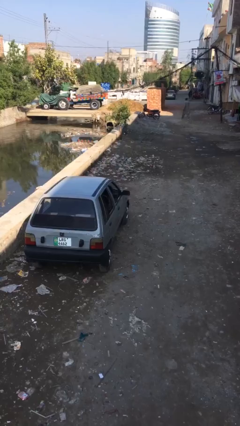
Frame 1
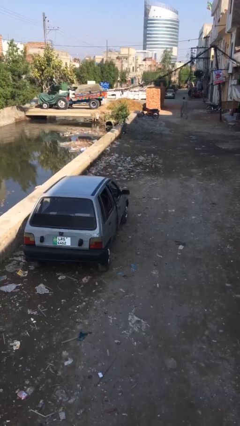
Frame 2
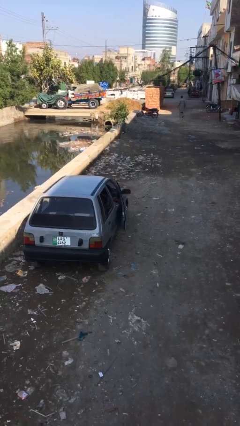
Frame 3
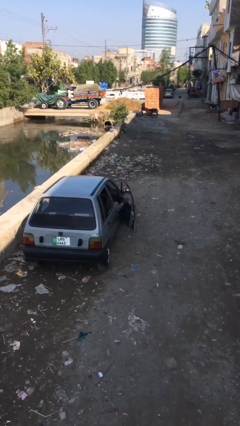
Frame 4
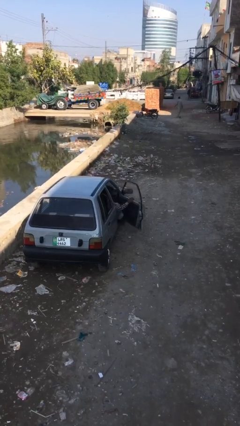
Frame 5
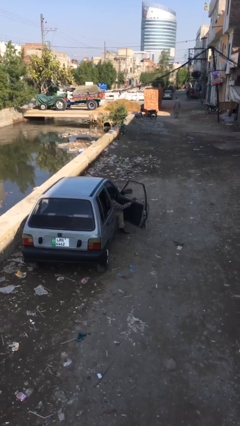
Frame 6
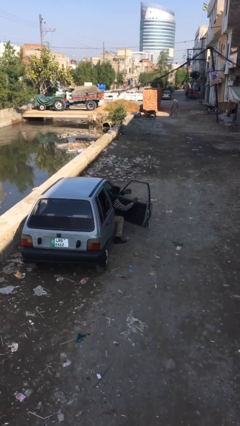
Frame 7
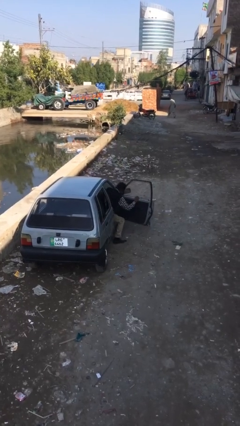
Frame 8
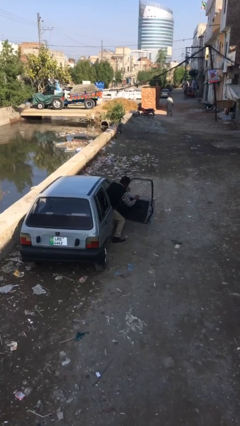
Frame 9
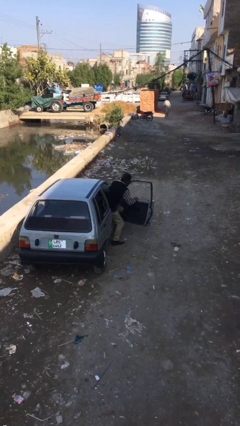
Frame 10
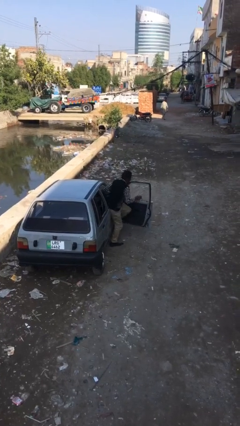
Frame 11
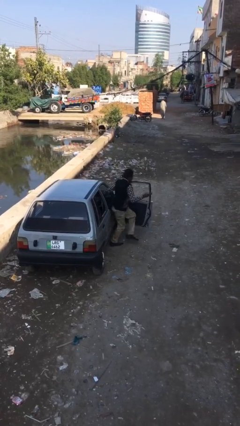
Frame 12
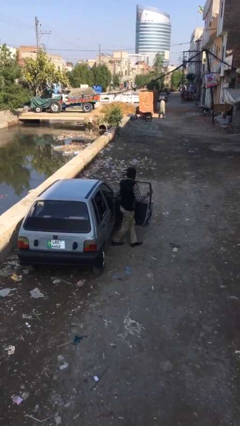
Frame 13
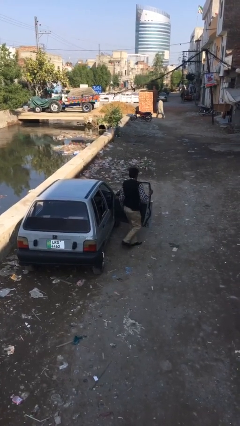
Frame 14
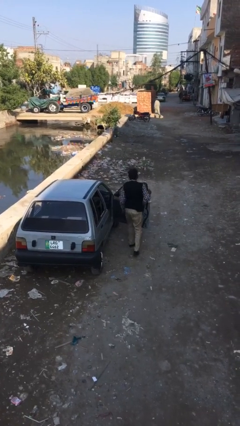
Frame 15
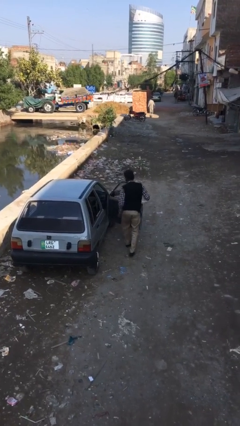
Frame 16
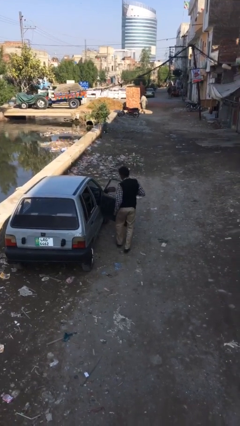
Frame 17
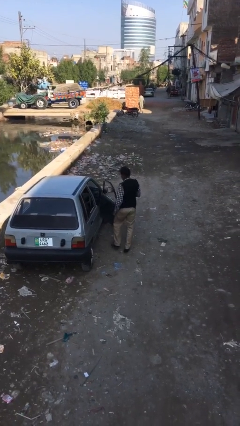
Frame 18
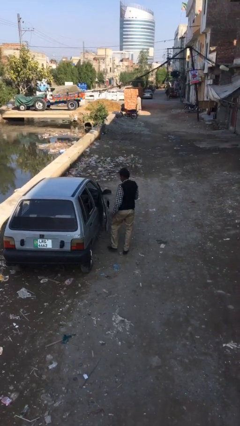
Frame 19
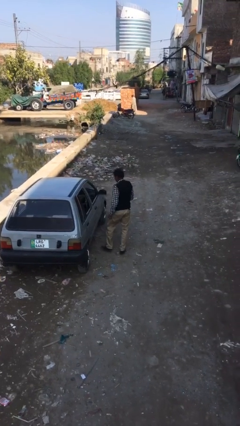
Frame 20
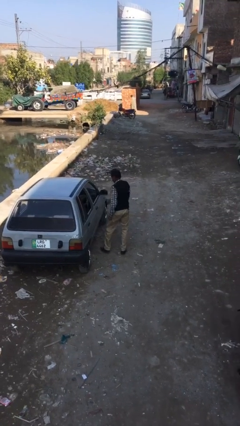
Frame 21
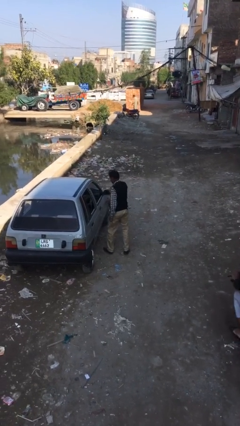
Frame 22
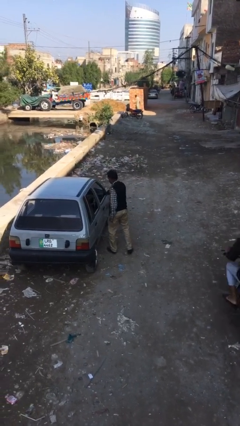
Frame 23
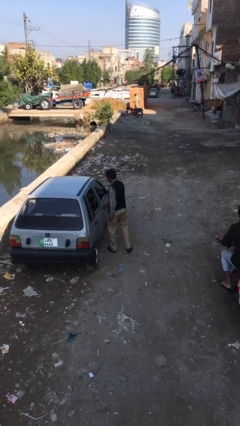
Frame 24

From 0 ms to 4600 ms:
person exits car

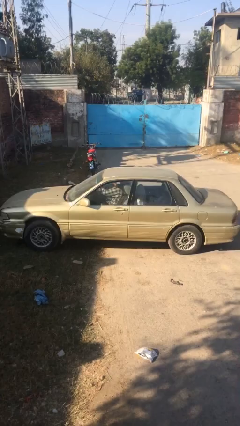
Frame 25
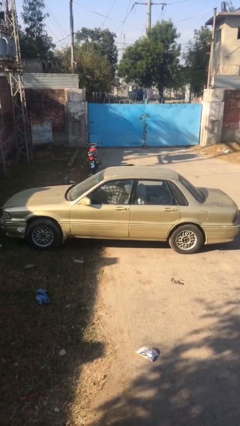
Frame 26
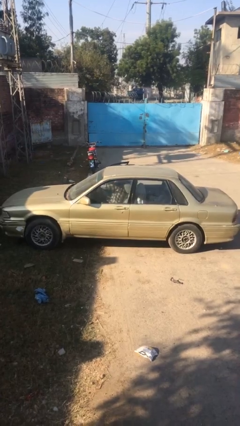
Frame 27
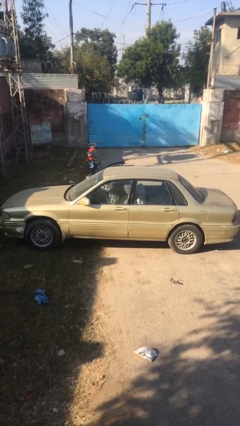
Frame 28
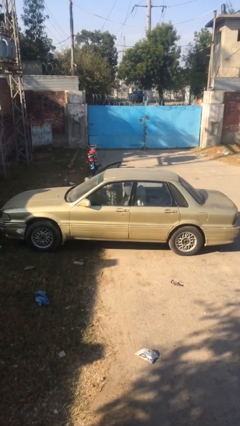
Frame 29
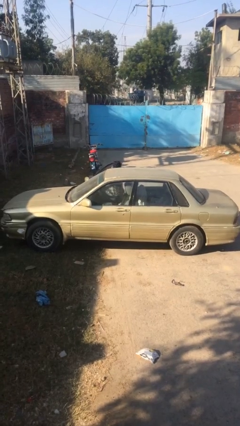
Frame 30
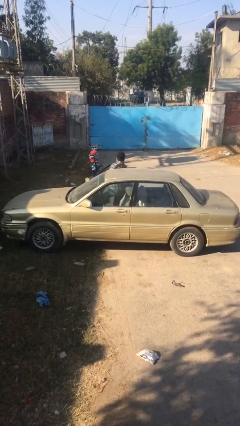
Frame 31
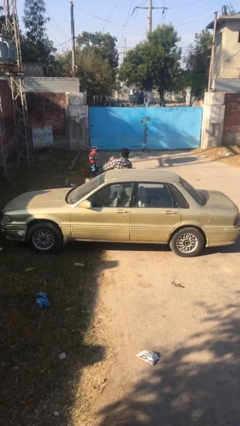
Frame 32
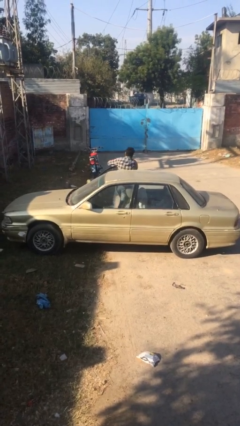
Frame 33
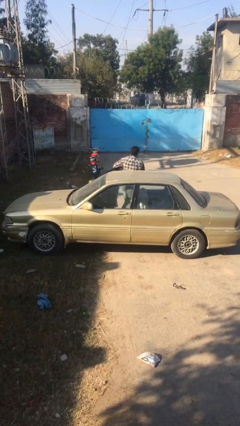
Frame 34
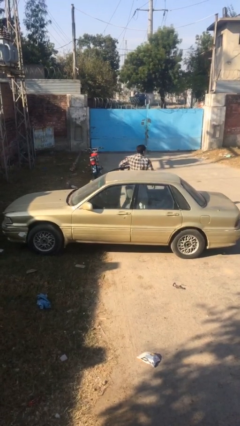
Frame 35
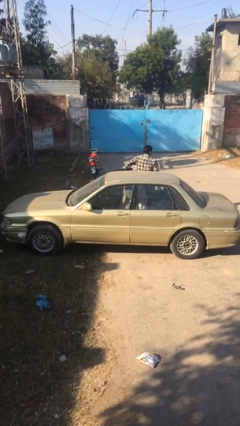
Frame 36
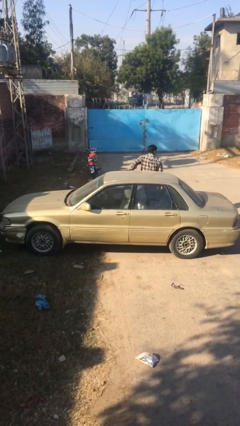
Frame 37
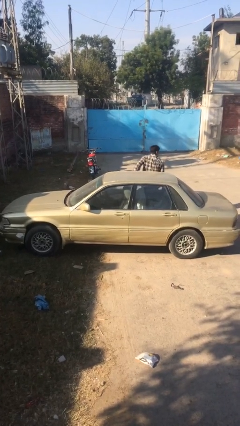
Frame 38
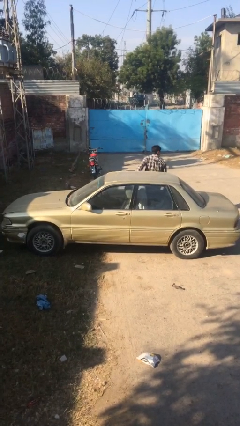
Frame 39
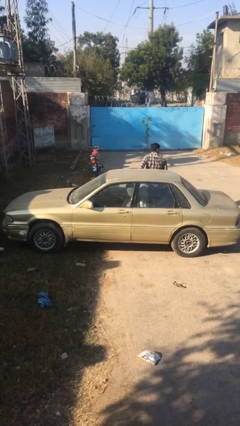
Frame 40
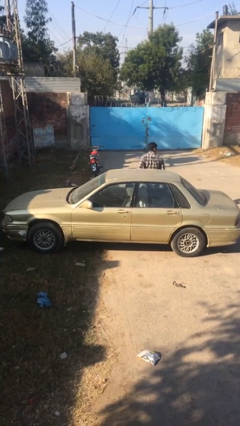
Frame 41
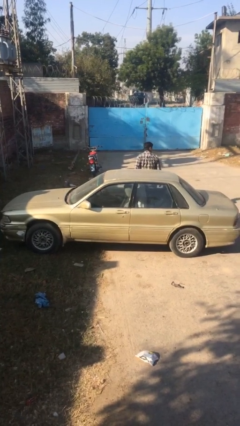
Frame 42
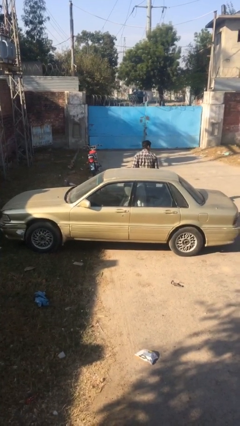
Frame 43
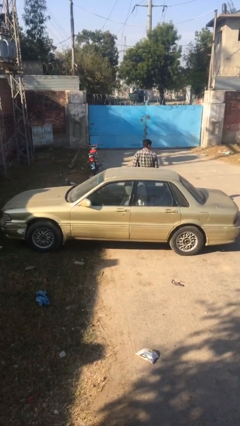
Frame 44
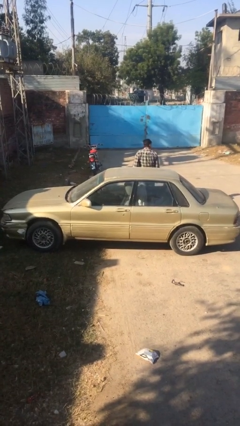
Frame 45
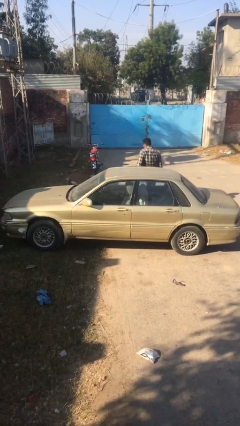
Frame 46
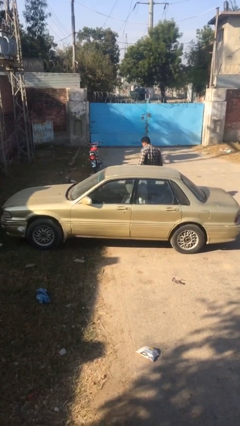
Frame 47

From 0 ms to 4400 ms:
car drops off person

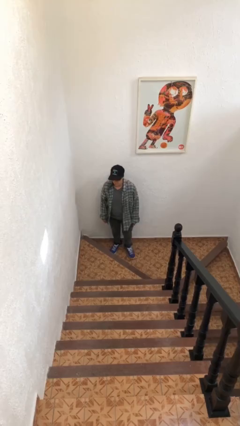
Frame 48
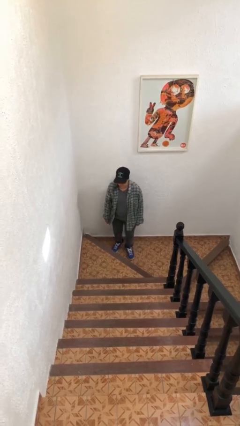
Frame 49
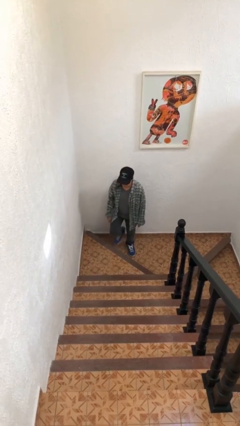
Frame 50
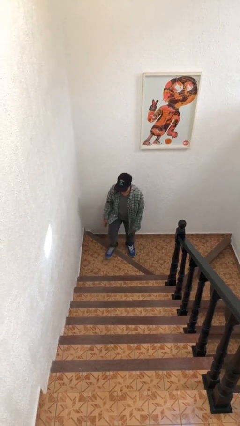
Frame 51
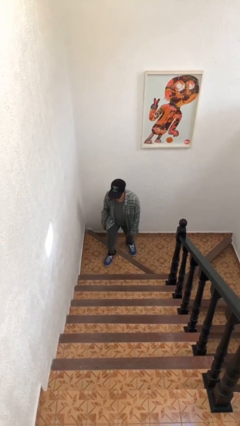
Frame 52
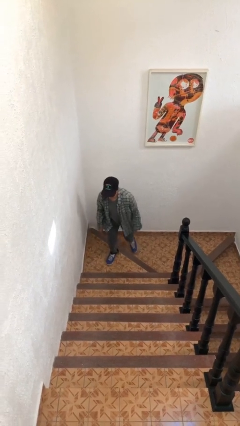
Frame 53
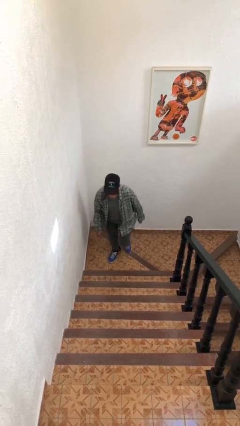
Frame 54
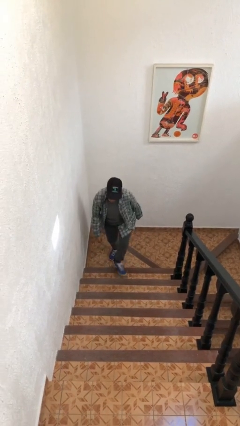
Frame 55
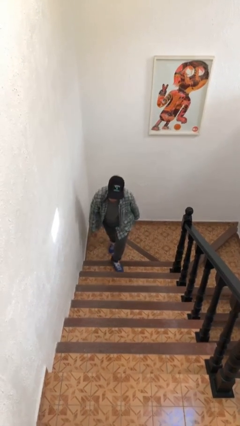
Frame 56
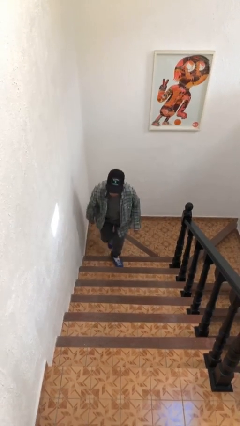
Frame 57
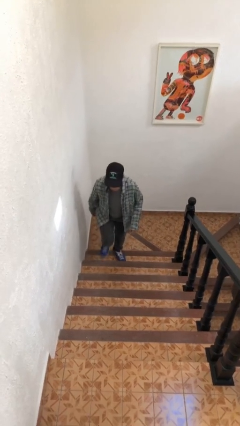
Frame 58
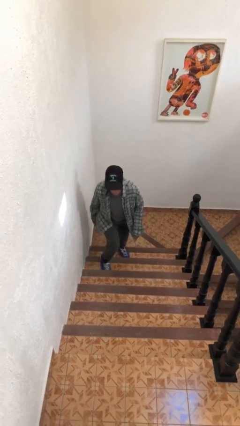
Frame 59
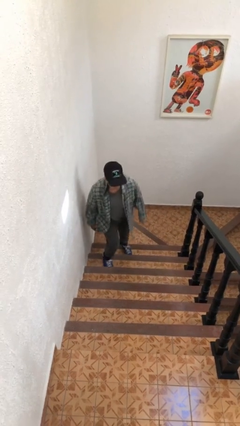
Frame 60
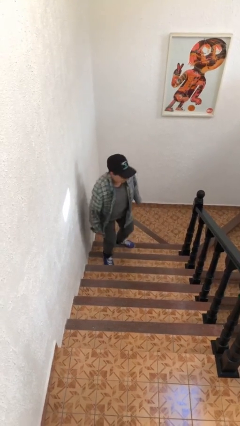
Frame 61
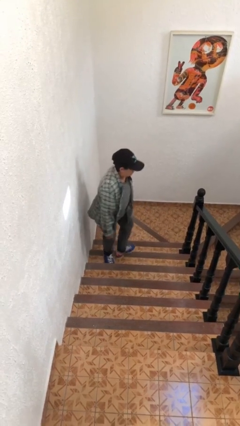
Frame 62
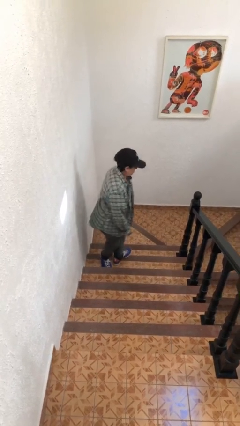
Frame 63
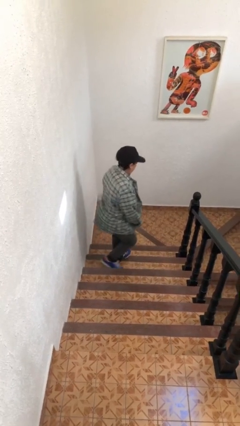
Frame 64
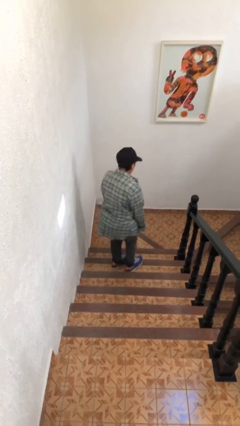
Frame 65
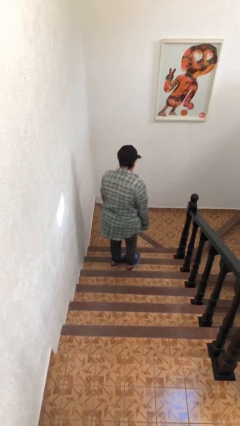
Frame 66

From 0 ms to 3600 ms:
person climbs up stairs

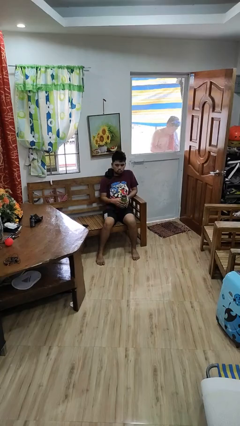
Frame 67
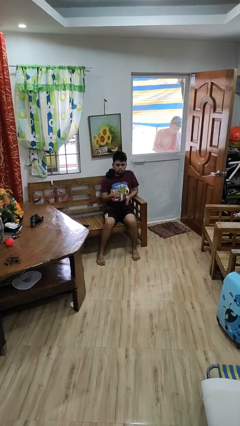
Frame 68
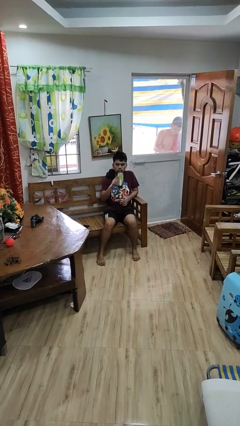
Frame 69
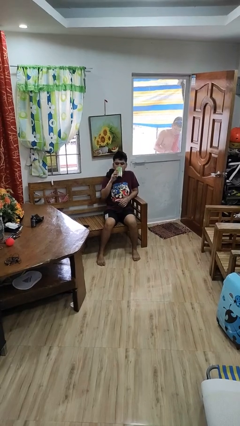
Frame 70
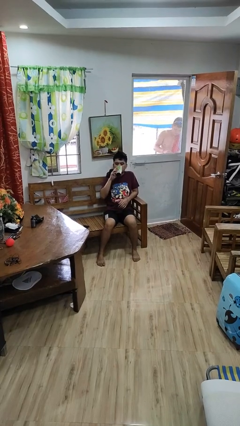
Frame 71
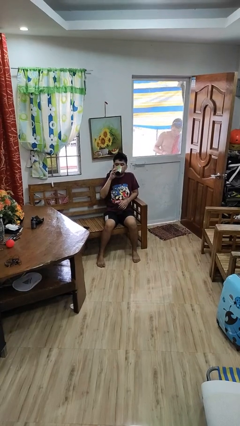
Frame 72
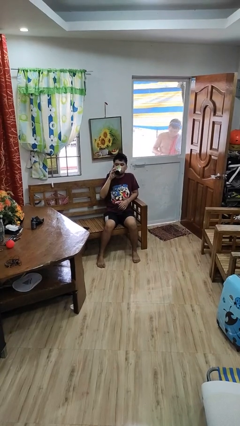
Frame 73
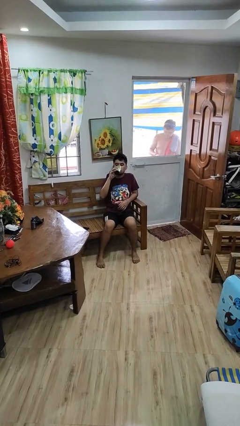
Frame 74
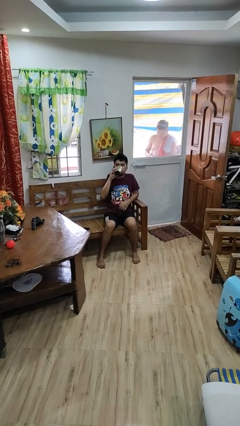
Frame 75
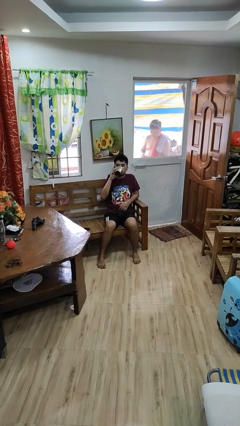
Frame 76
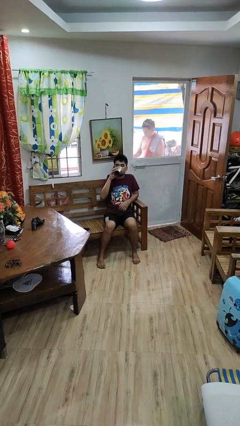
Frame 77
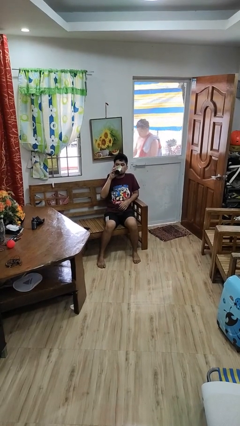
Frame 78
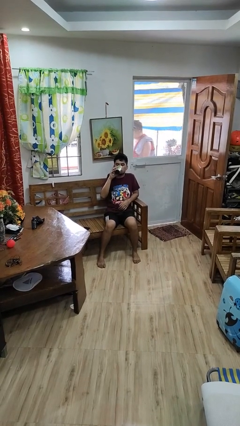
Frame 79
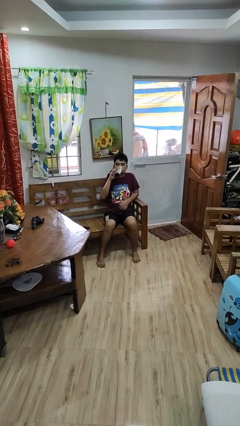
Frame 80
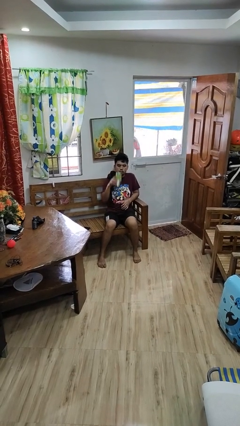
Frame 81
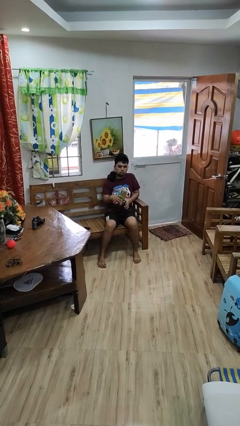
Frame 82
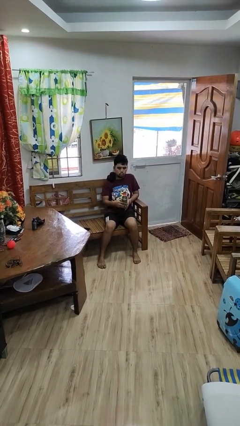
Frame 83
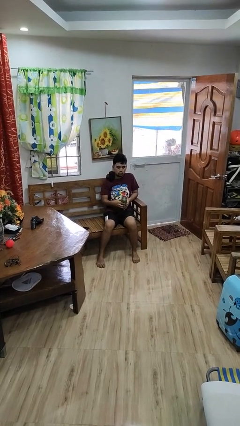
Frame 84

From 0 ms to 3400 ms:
person drinks from bottle

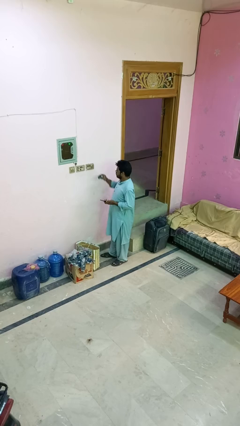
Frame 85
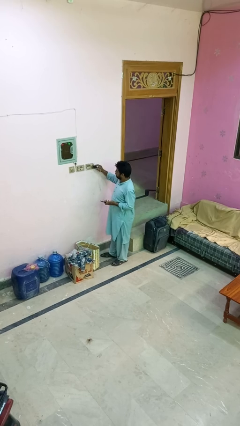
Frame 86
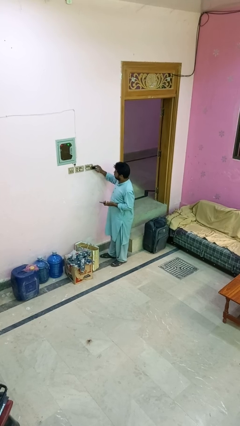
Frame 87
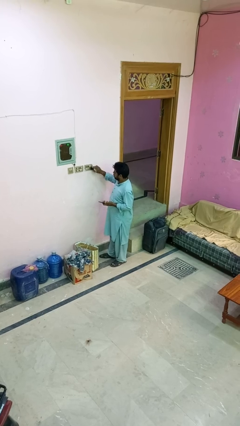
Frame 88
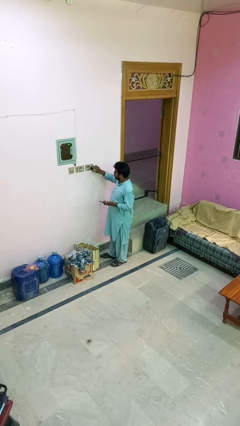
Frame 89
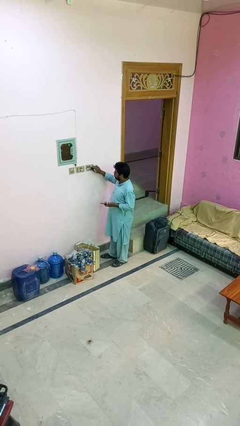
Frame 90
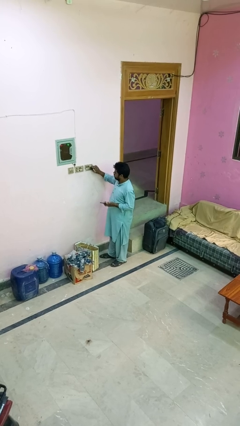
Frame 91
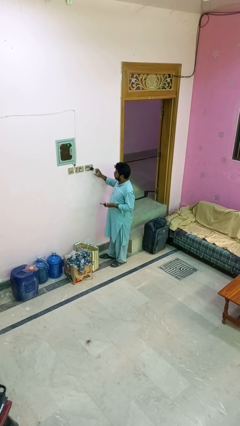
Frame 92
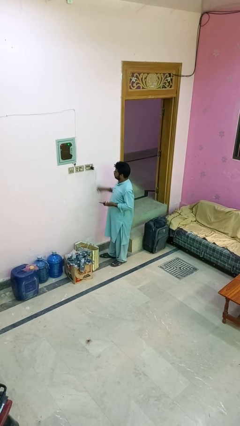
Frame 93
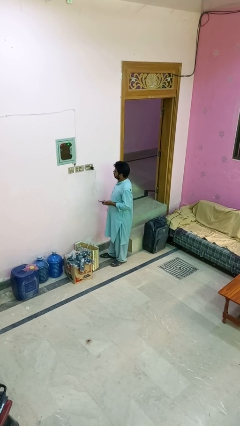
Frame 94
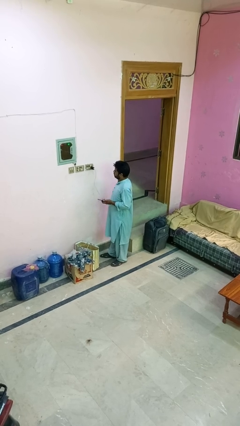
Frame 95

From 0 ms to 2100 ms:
person plugs into electrical socket
